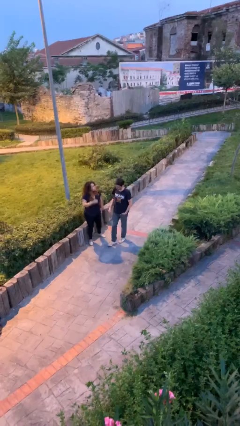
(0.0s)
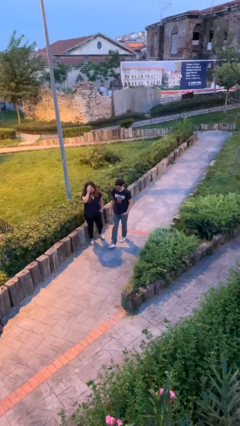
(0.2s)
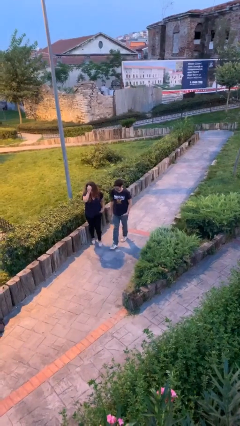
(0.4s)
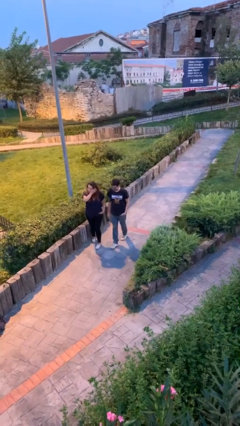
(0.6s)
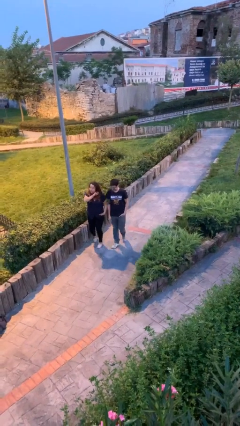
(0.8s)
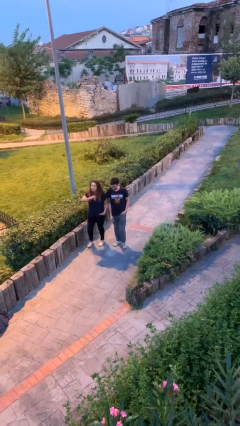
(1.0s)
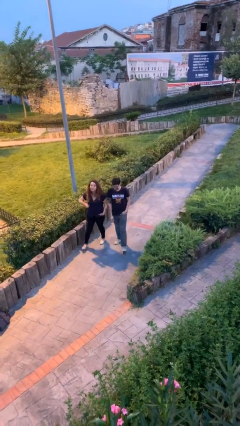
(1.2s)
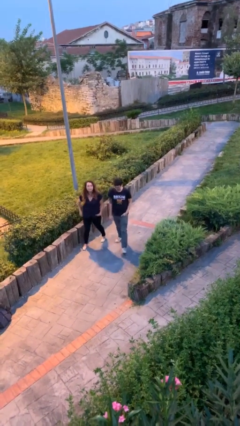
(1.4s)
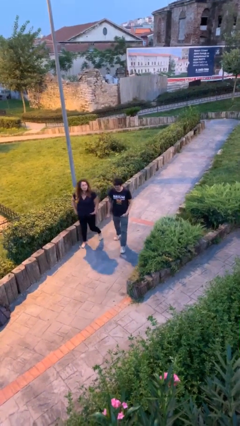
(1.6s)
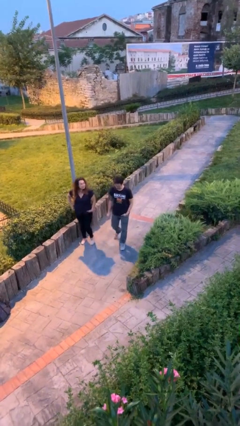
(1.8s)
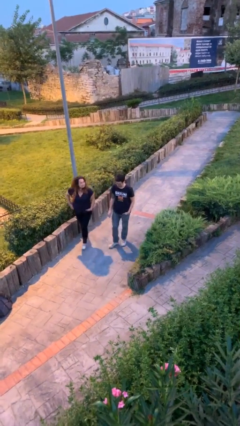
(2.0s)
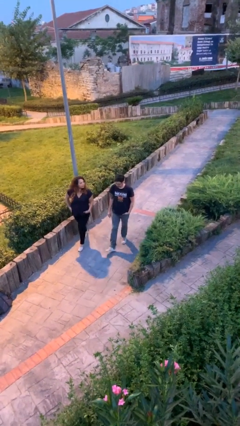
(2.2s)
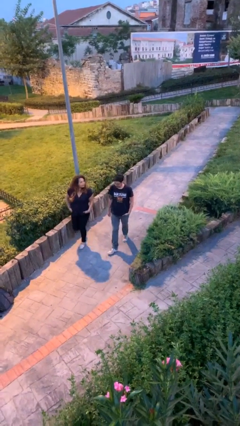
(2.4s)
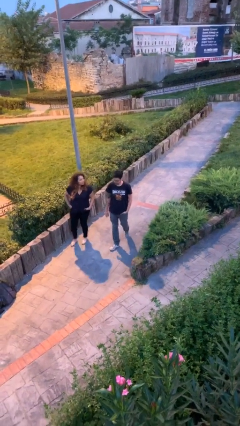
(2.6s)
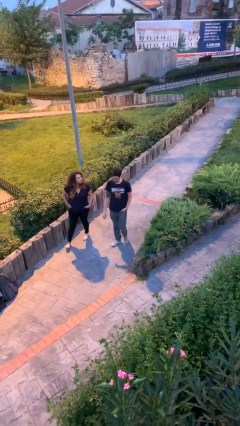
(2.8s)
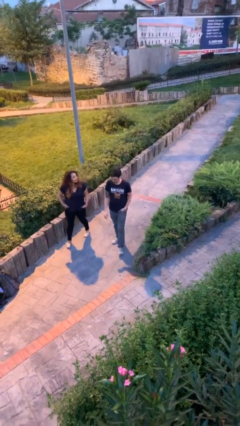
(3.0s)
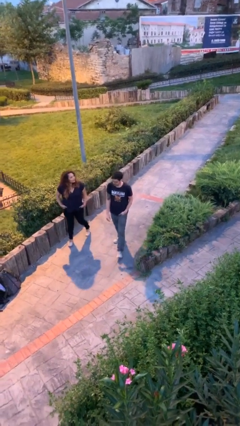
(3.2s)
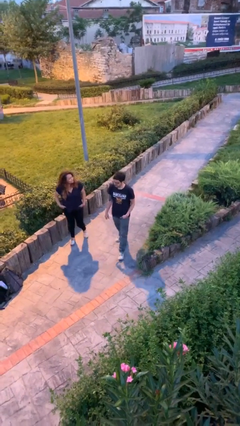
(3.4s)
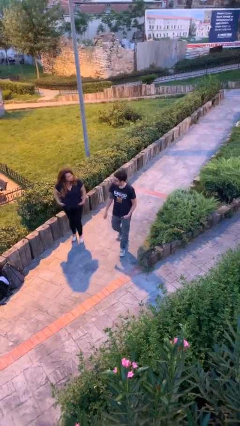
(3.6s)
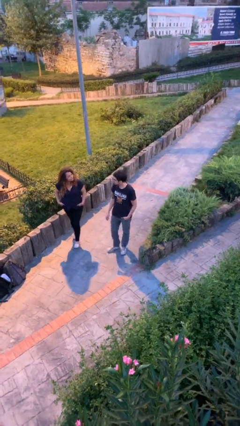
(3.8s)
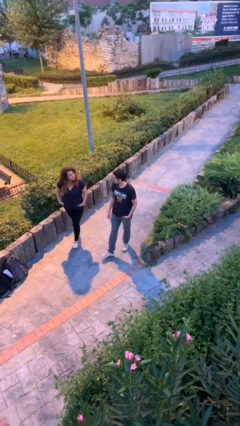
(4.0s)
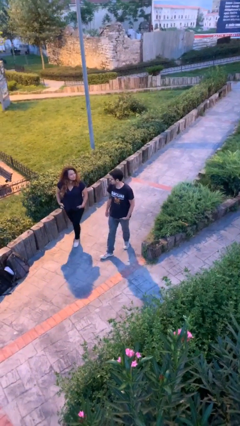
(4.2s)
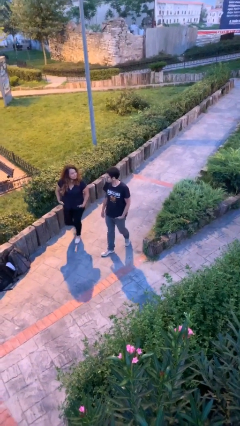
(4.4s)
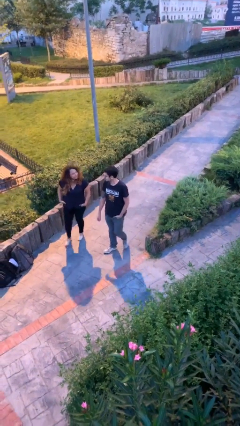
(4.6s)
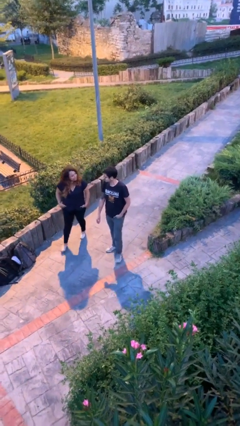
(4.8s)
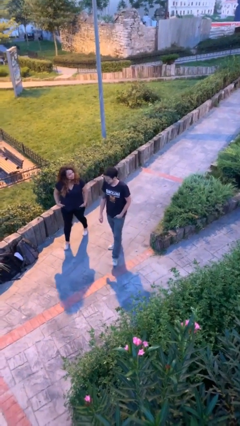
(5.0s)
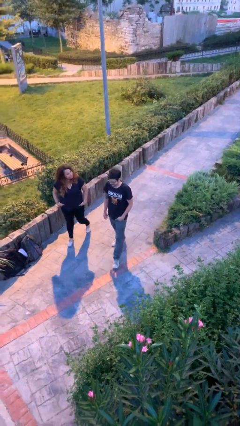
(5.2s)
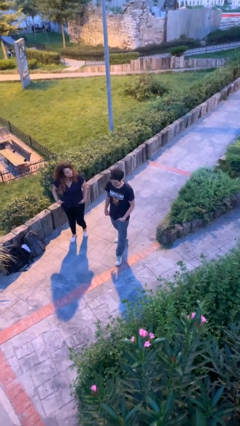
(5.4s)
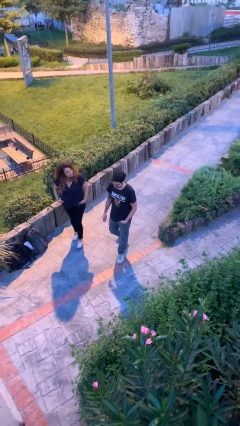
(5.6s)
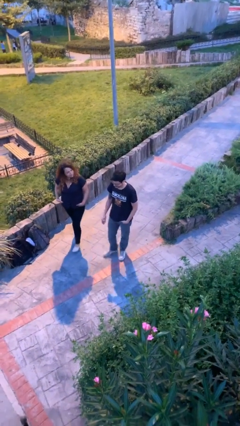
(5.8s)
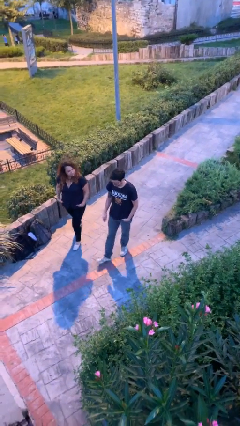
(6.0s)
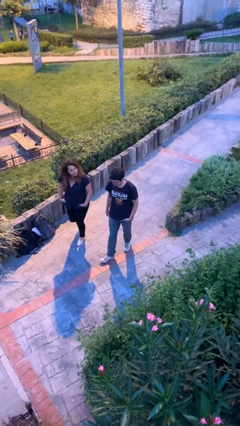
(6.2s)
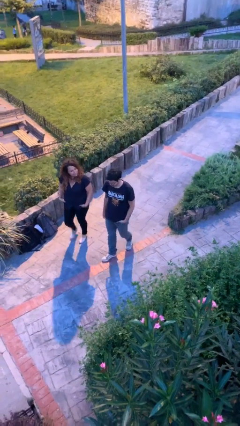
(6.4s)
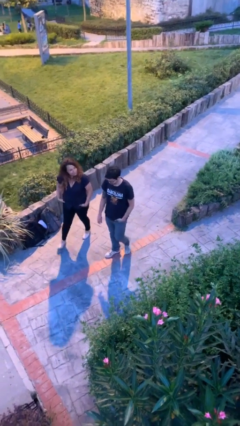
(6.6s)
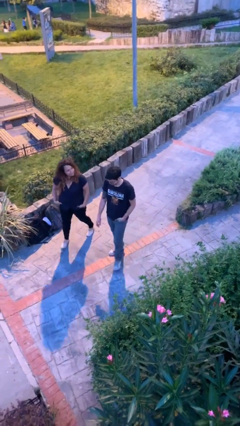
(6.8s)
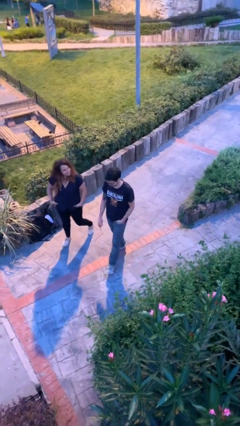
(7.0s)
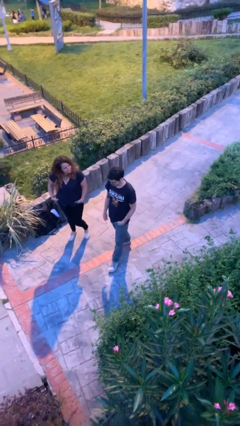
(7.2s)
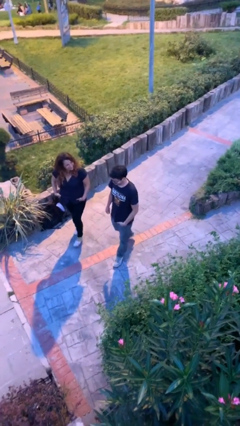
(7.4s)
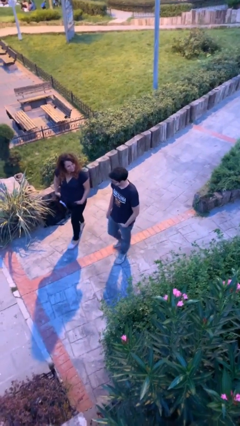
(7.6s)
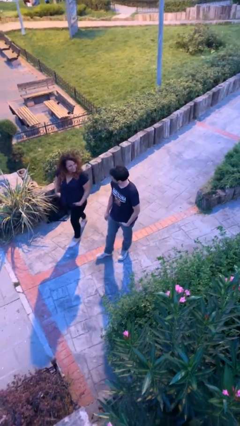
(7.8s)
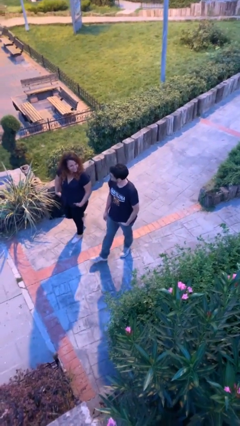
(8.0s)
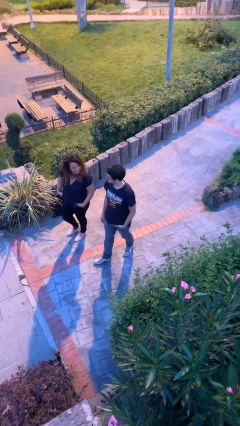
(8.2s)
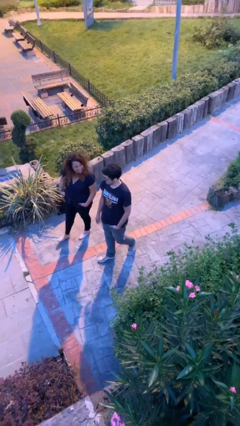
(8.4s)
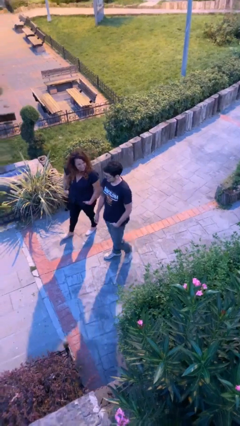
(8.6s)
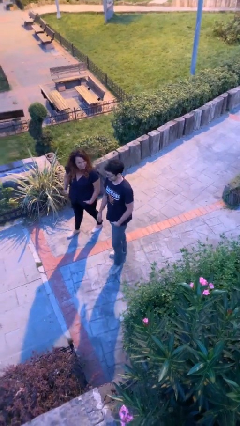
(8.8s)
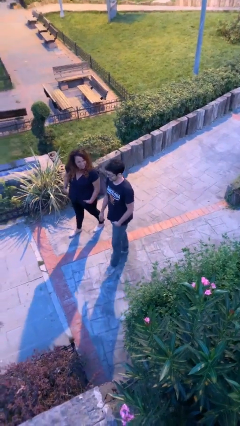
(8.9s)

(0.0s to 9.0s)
person talks to person

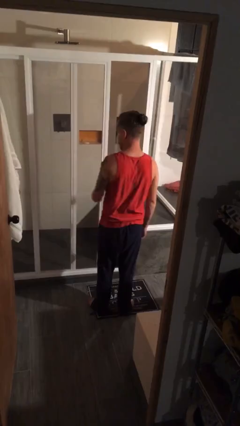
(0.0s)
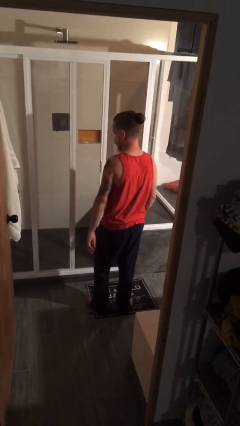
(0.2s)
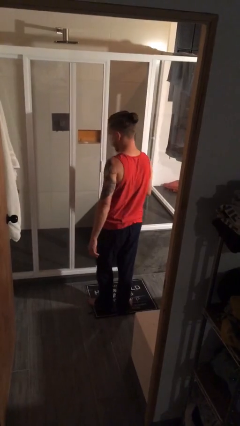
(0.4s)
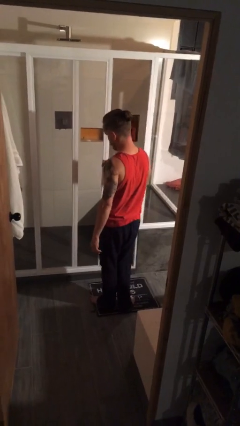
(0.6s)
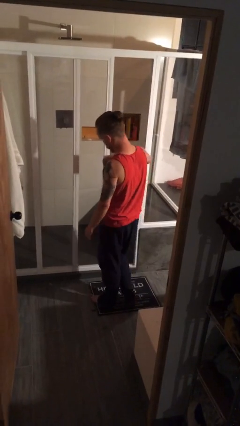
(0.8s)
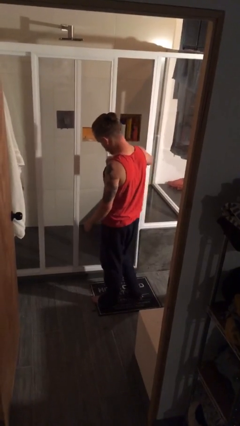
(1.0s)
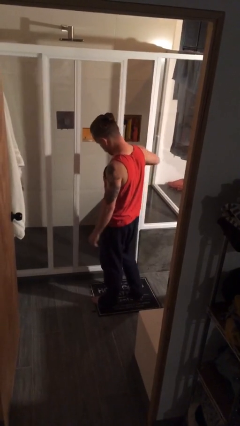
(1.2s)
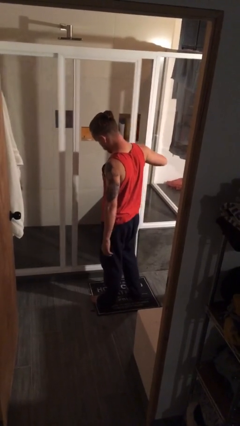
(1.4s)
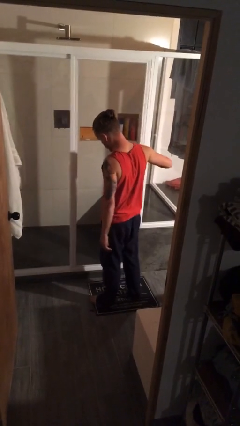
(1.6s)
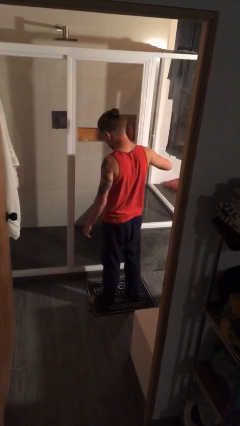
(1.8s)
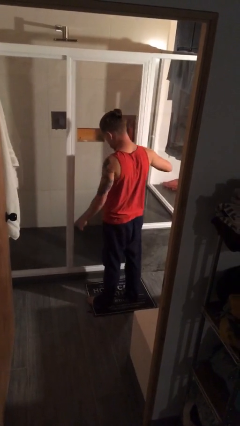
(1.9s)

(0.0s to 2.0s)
person closes sliding door

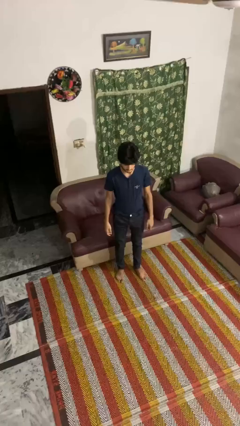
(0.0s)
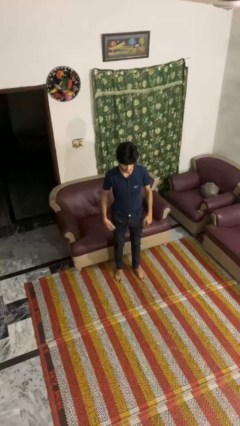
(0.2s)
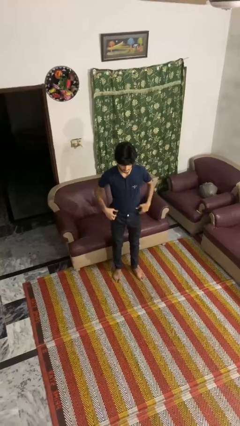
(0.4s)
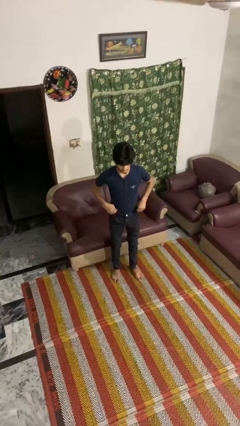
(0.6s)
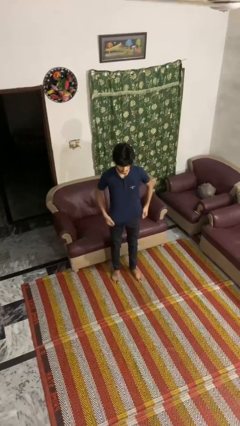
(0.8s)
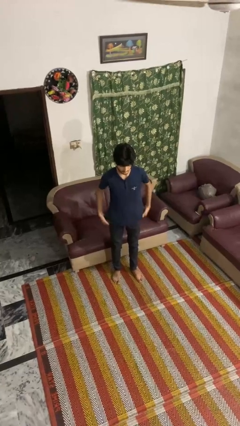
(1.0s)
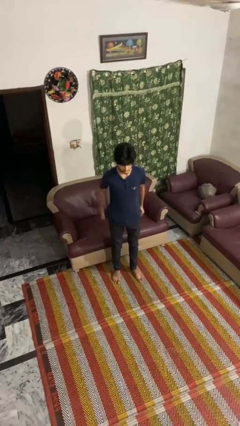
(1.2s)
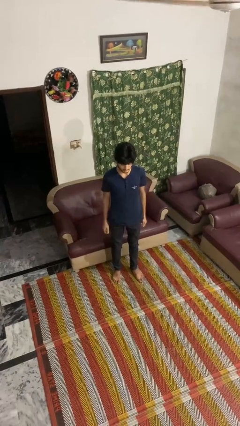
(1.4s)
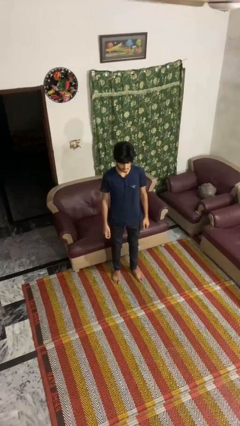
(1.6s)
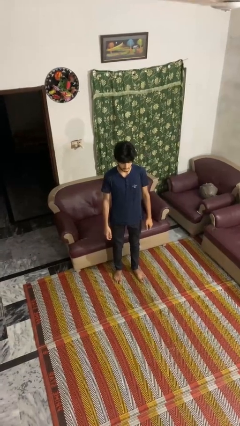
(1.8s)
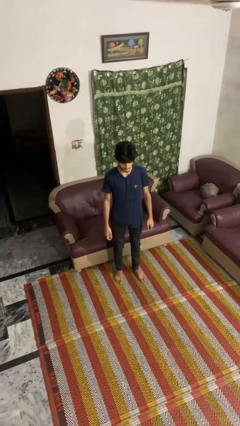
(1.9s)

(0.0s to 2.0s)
person untucks shirt

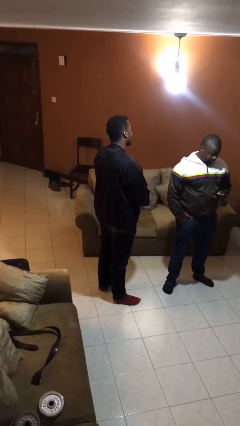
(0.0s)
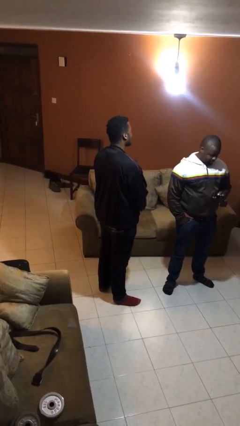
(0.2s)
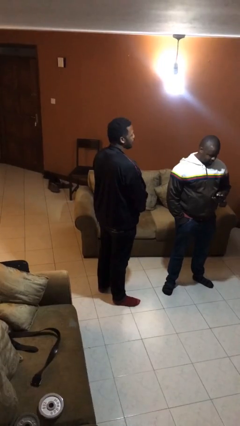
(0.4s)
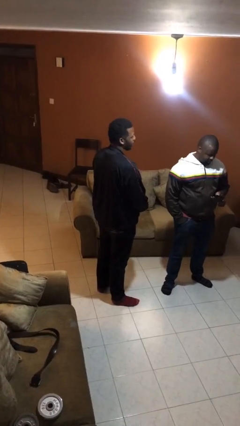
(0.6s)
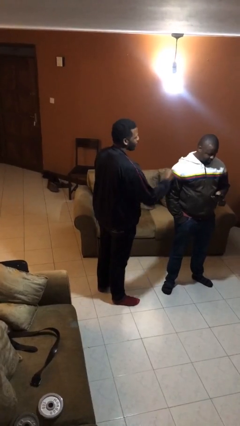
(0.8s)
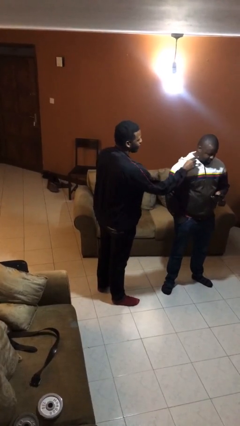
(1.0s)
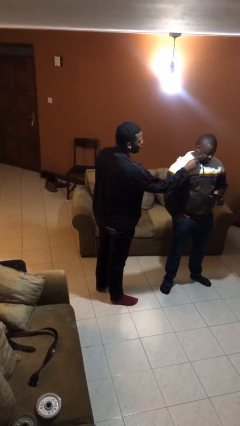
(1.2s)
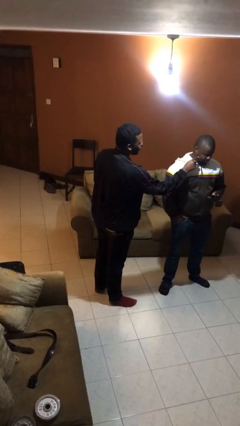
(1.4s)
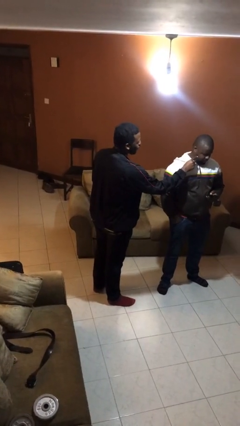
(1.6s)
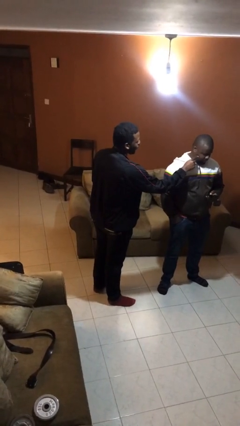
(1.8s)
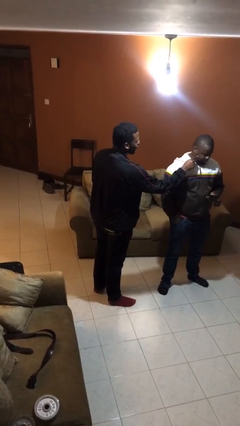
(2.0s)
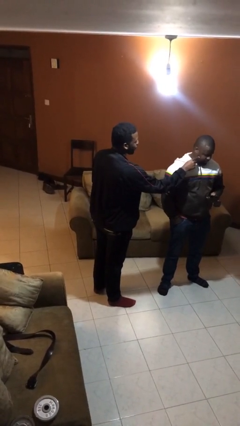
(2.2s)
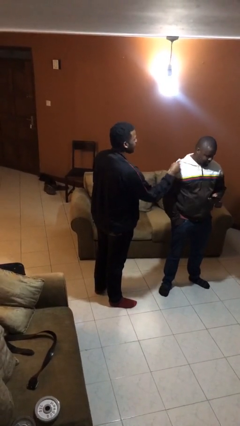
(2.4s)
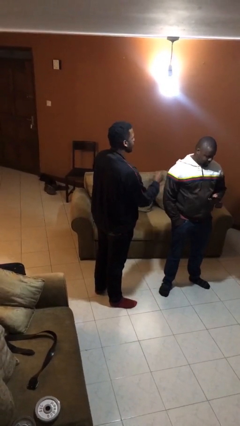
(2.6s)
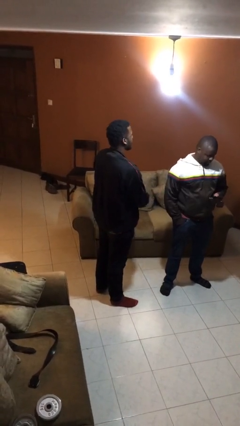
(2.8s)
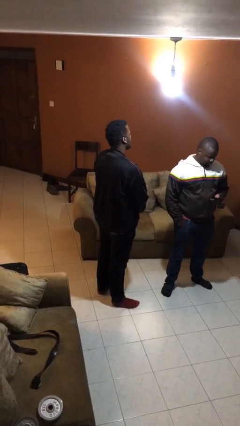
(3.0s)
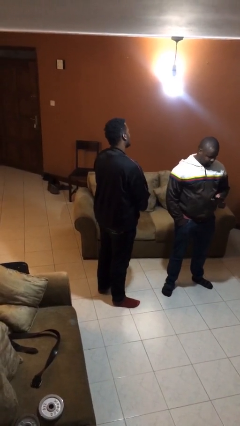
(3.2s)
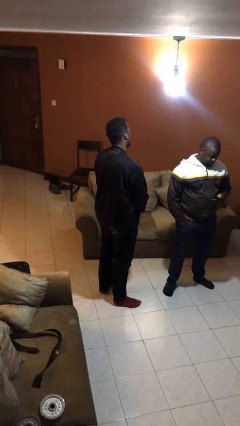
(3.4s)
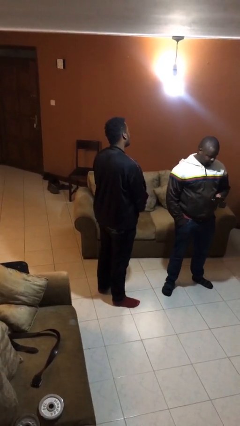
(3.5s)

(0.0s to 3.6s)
person touches face of person

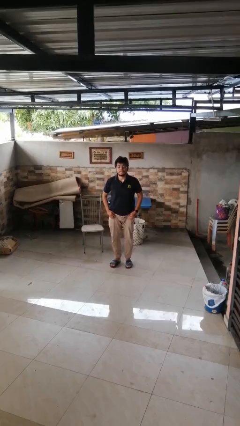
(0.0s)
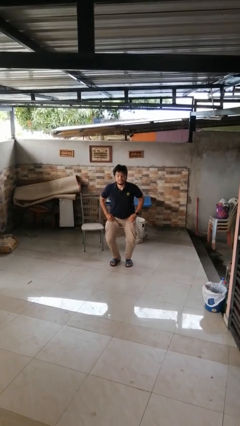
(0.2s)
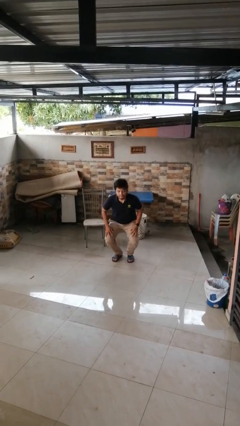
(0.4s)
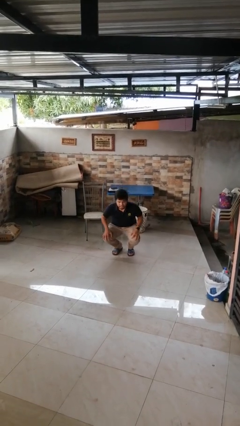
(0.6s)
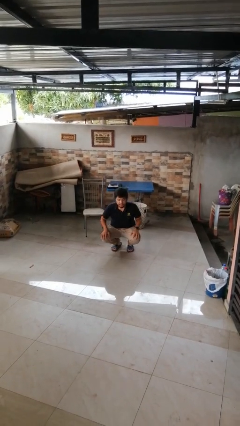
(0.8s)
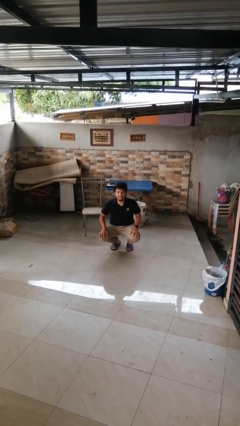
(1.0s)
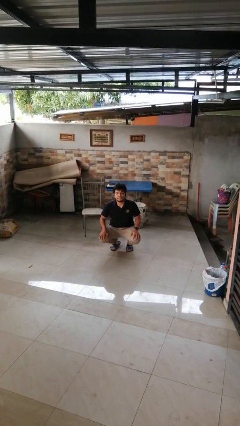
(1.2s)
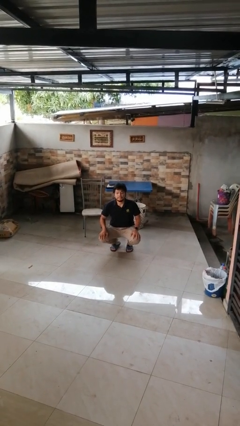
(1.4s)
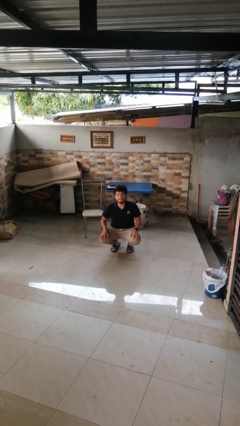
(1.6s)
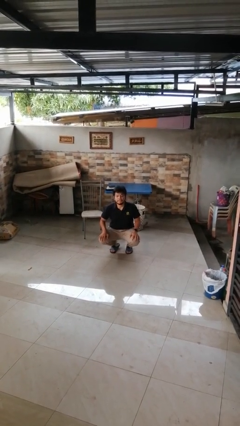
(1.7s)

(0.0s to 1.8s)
person squats
